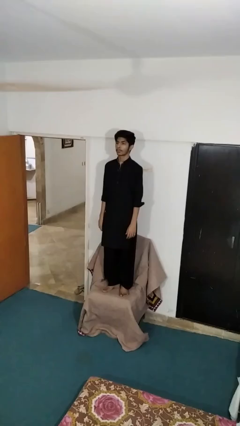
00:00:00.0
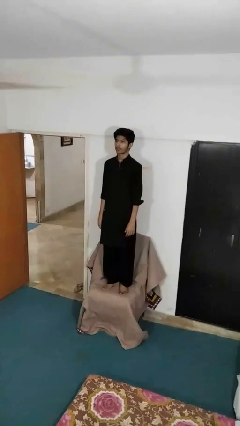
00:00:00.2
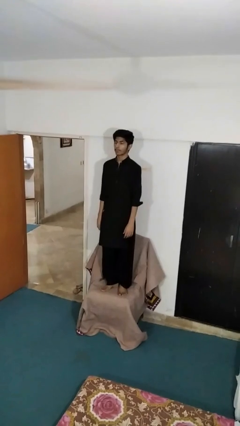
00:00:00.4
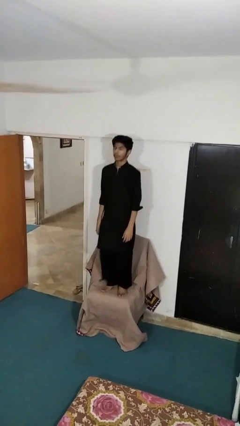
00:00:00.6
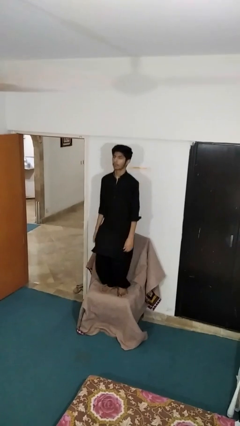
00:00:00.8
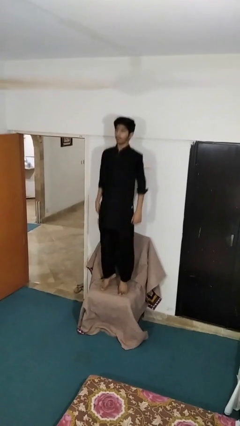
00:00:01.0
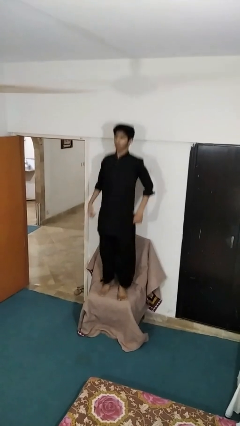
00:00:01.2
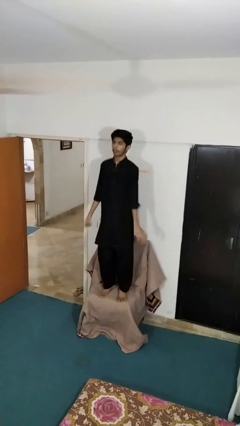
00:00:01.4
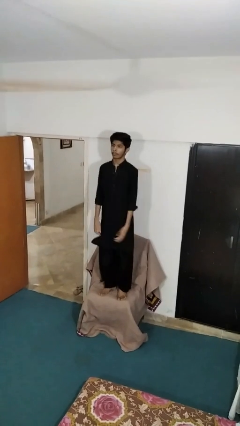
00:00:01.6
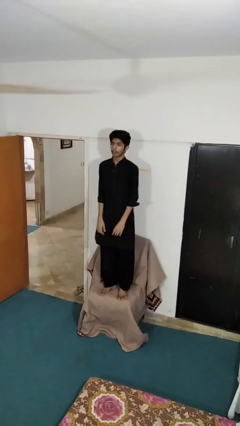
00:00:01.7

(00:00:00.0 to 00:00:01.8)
person jumps on couch

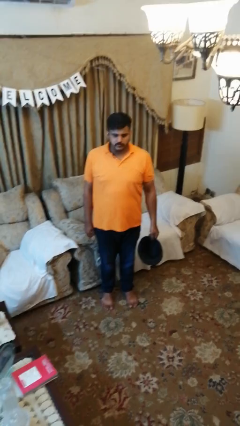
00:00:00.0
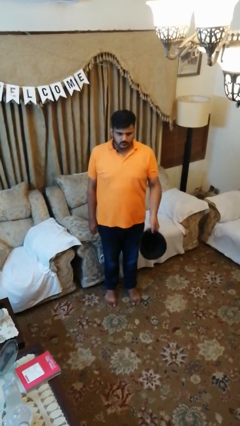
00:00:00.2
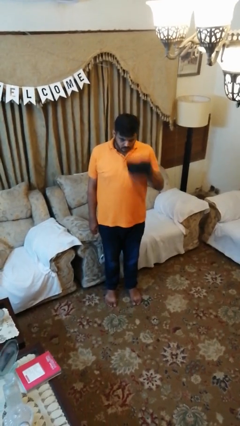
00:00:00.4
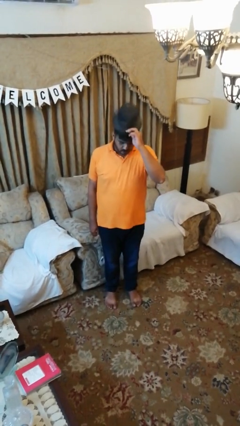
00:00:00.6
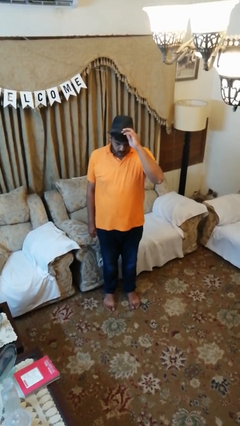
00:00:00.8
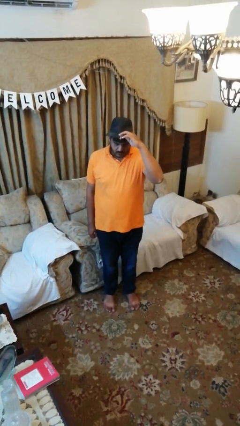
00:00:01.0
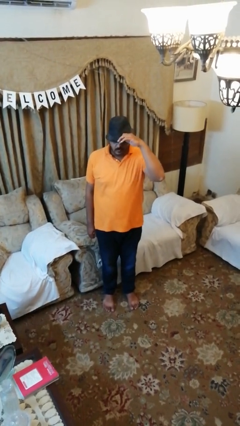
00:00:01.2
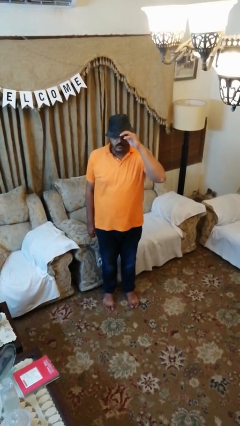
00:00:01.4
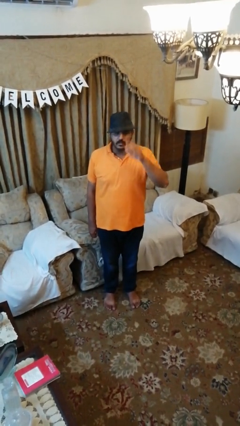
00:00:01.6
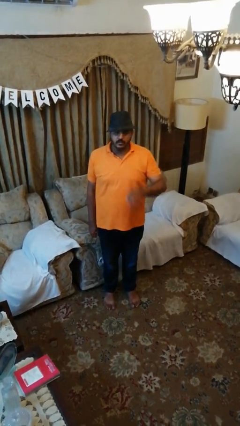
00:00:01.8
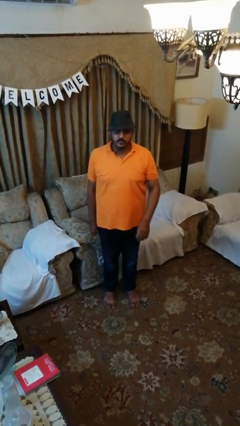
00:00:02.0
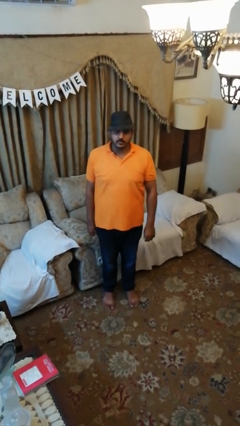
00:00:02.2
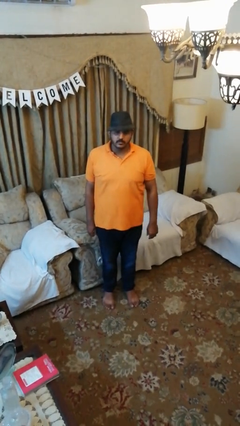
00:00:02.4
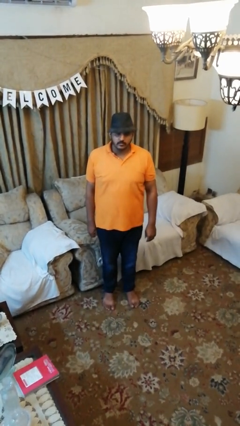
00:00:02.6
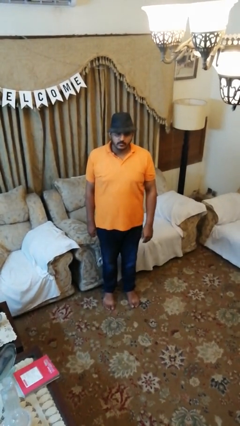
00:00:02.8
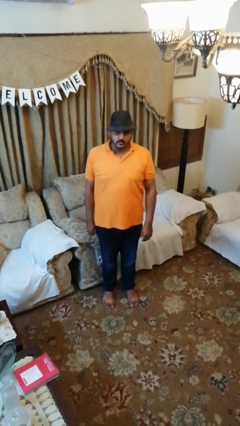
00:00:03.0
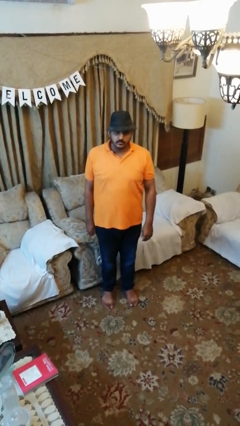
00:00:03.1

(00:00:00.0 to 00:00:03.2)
person puts on hat

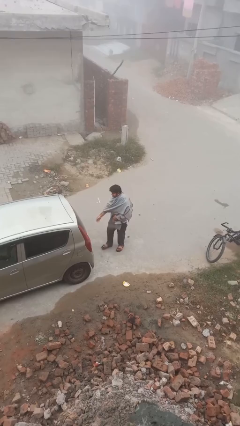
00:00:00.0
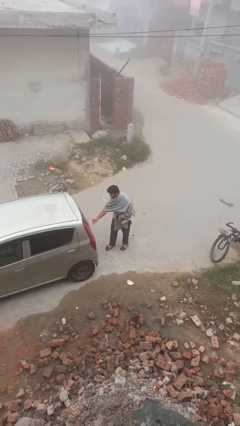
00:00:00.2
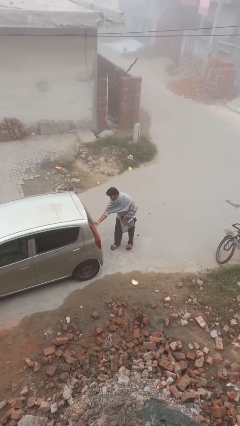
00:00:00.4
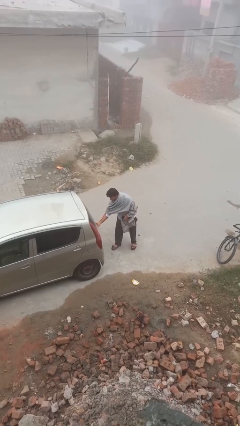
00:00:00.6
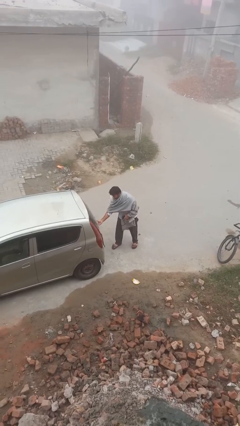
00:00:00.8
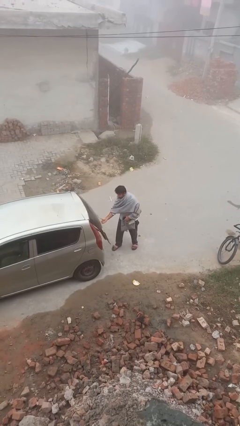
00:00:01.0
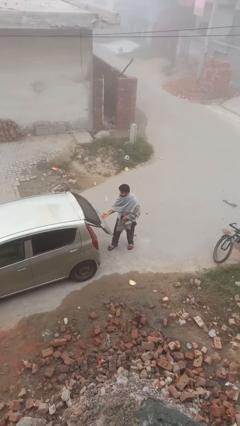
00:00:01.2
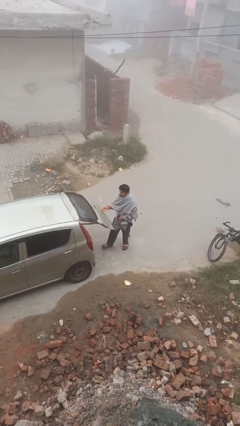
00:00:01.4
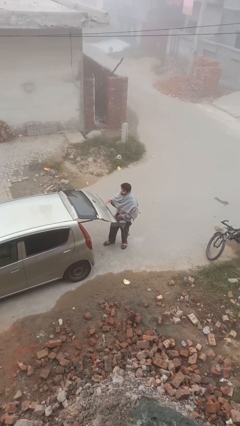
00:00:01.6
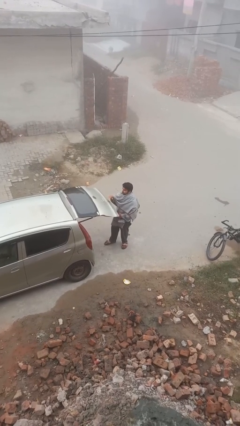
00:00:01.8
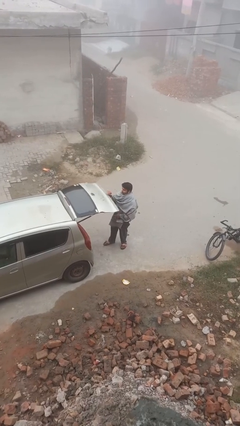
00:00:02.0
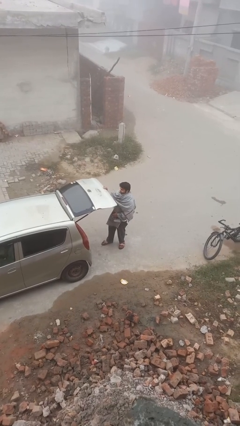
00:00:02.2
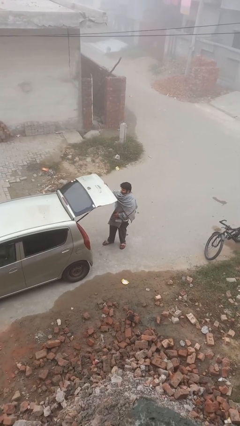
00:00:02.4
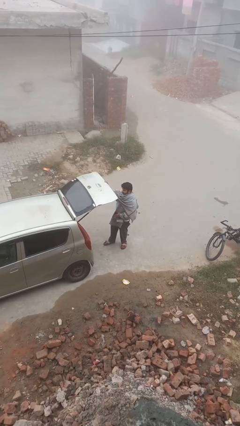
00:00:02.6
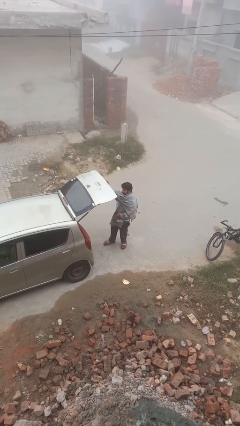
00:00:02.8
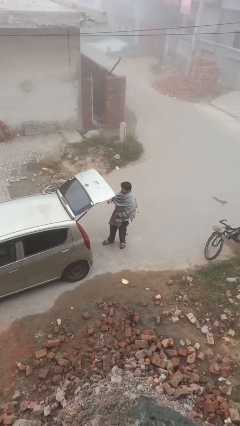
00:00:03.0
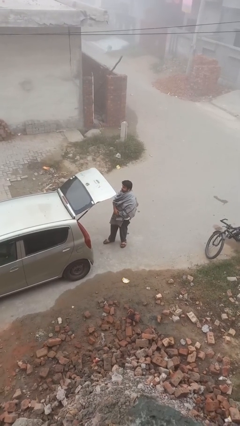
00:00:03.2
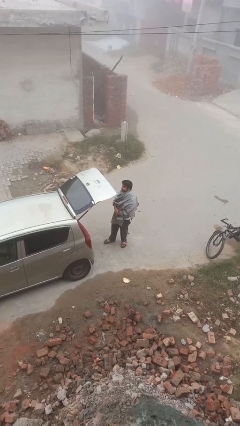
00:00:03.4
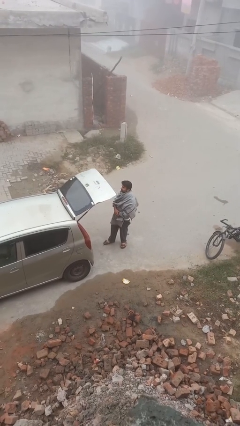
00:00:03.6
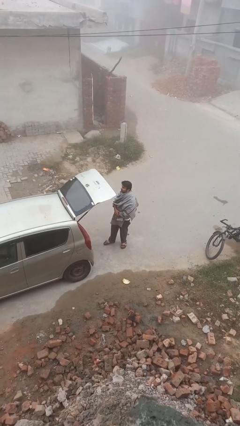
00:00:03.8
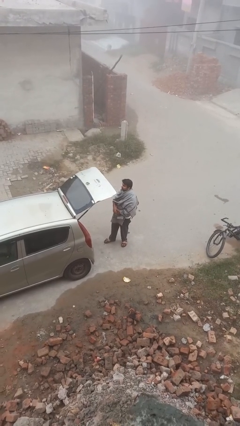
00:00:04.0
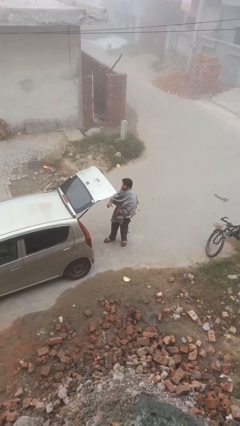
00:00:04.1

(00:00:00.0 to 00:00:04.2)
person opens car trunk

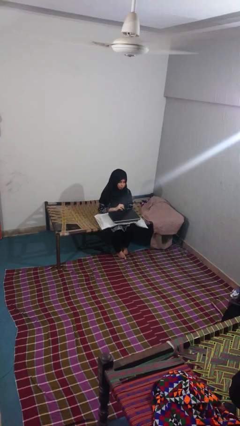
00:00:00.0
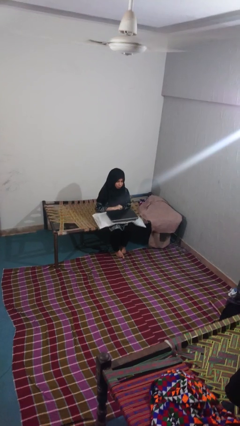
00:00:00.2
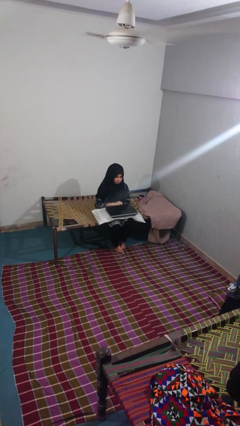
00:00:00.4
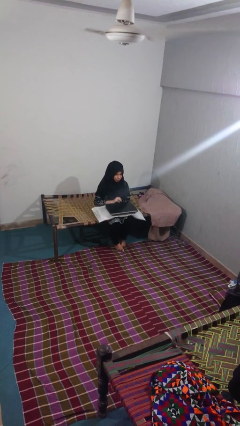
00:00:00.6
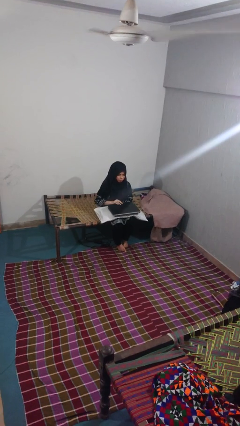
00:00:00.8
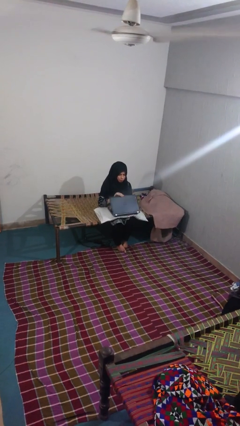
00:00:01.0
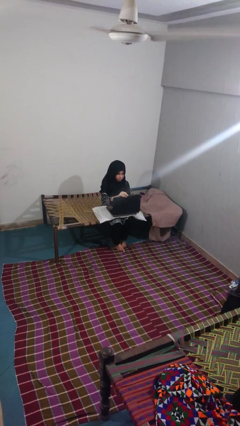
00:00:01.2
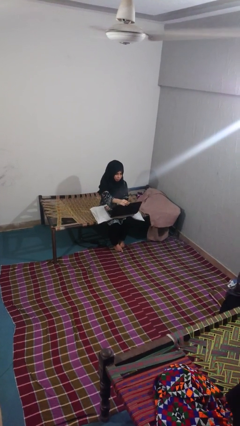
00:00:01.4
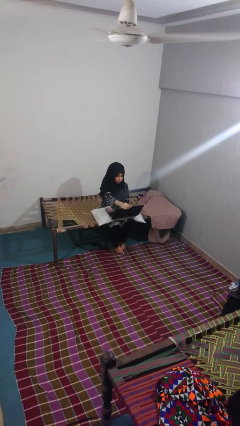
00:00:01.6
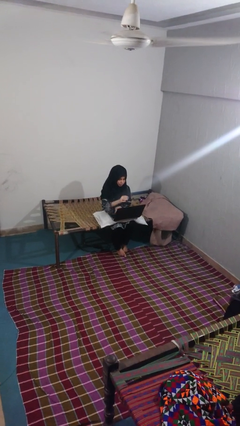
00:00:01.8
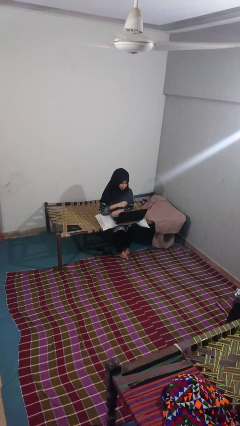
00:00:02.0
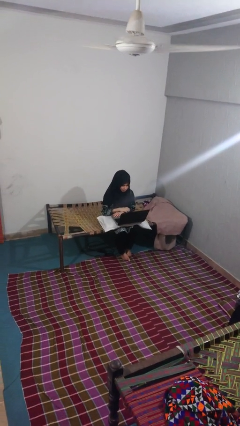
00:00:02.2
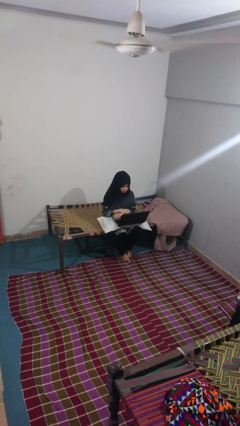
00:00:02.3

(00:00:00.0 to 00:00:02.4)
person opens laptop

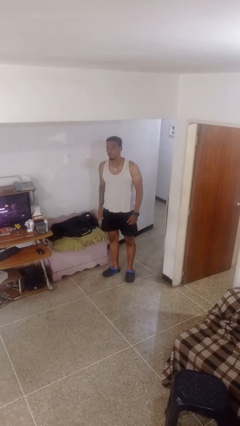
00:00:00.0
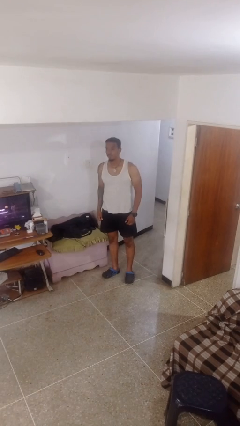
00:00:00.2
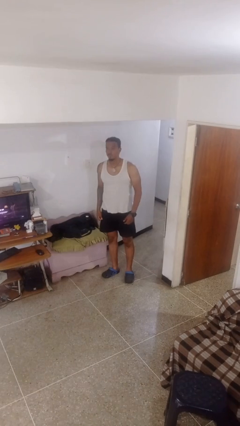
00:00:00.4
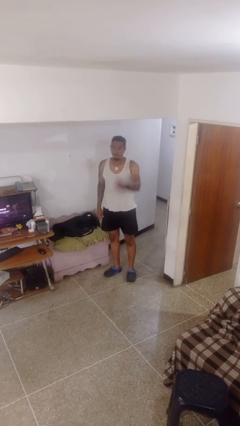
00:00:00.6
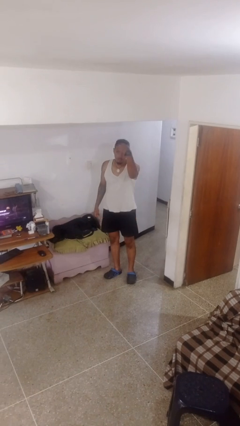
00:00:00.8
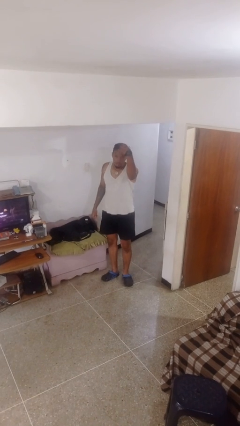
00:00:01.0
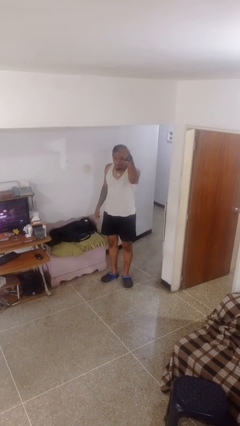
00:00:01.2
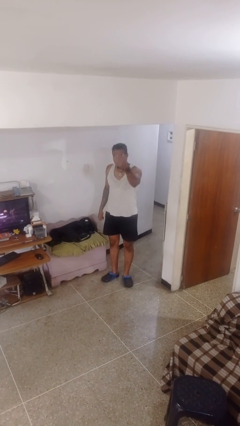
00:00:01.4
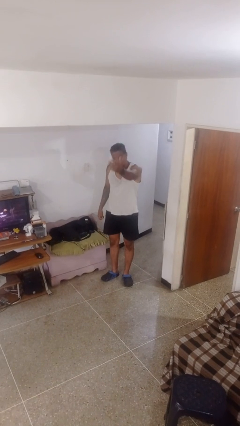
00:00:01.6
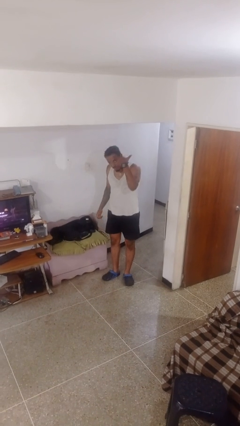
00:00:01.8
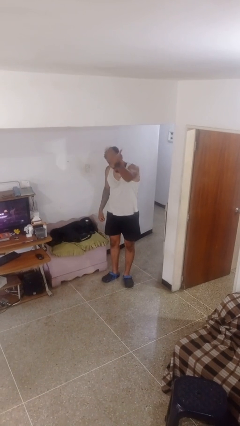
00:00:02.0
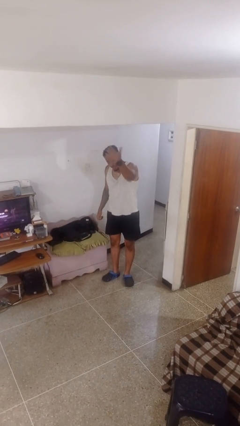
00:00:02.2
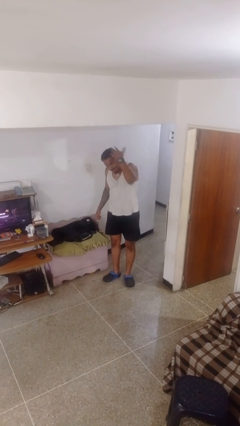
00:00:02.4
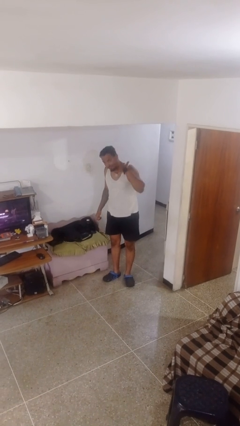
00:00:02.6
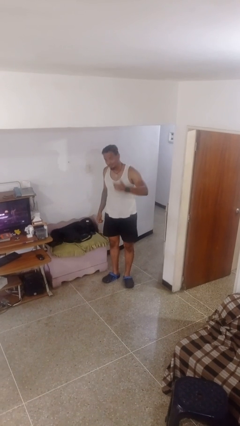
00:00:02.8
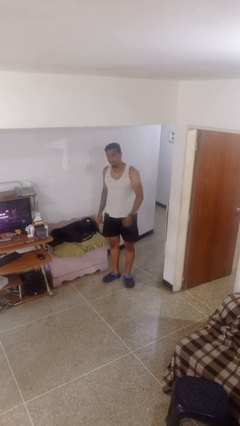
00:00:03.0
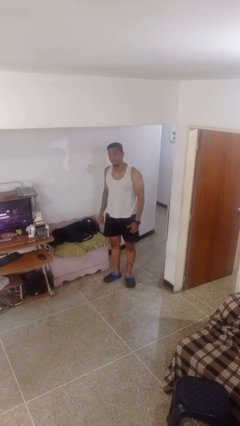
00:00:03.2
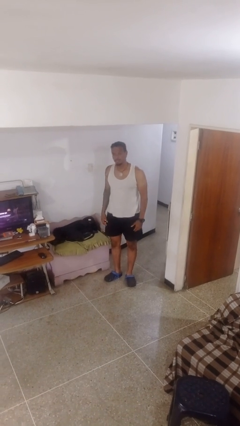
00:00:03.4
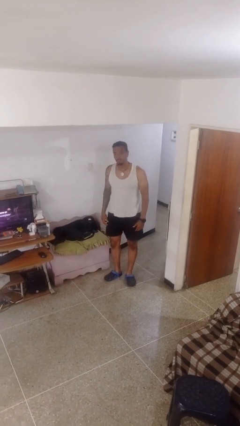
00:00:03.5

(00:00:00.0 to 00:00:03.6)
person gestures come here

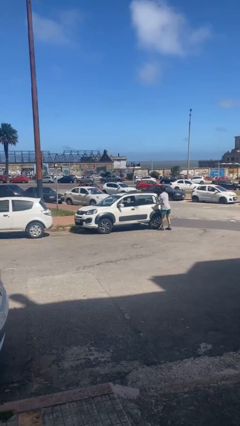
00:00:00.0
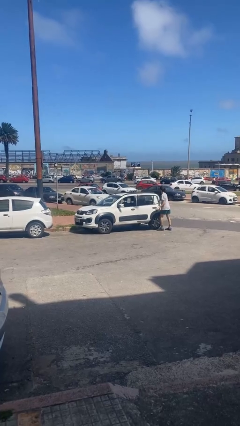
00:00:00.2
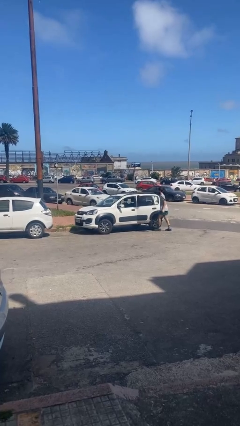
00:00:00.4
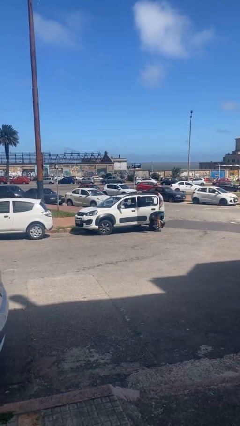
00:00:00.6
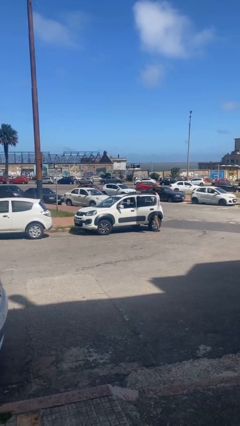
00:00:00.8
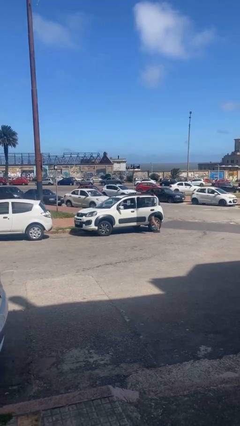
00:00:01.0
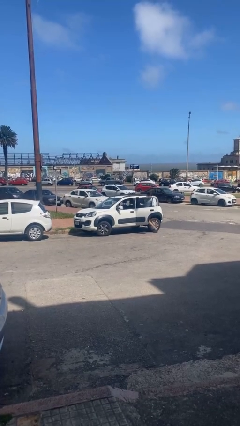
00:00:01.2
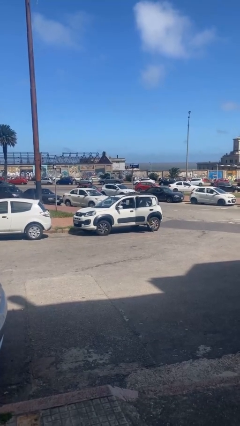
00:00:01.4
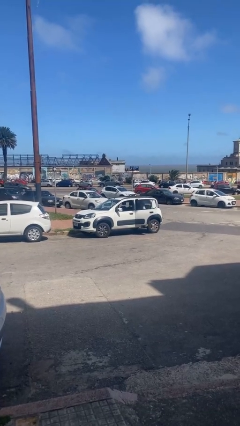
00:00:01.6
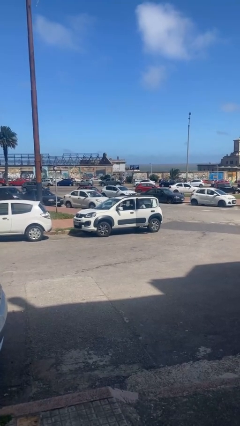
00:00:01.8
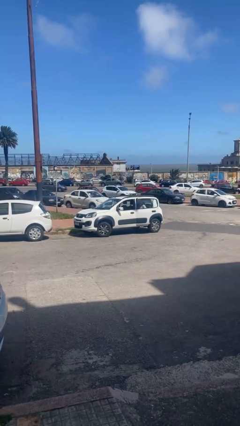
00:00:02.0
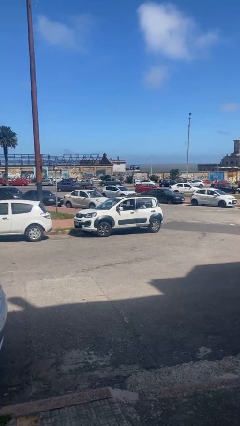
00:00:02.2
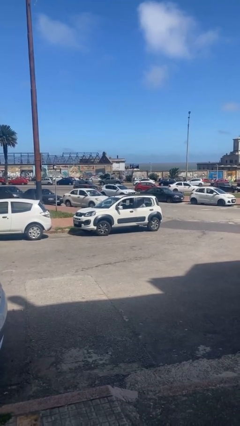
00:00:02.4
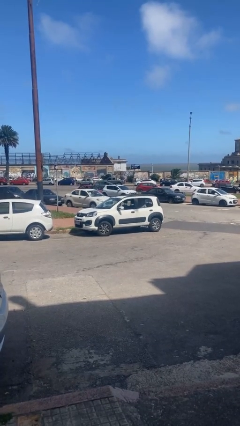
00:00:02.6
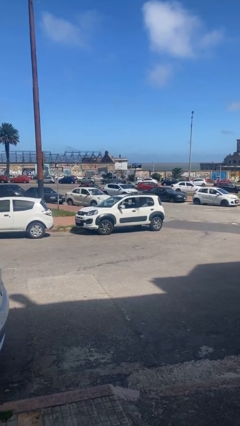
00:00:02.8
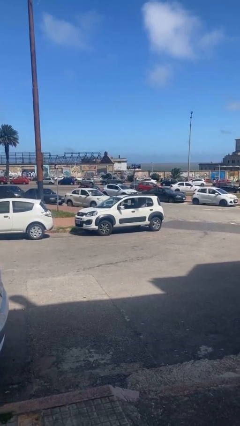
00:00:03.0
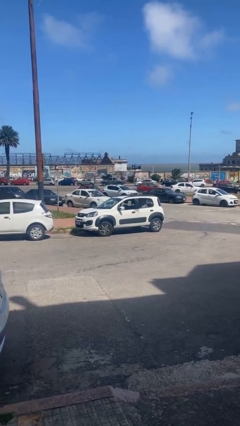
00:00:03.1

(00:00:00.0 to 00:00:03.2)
car picks up person
